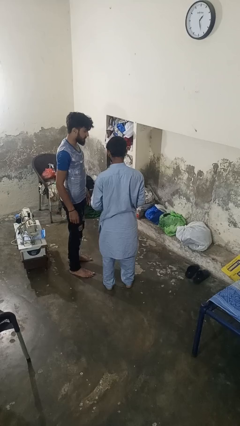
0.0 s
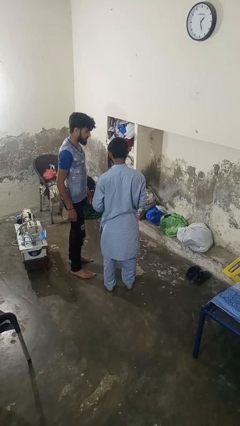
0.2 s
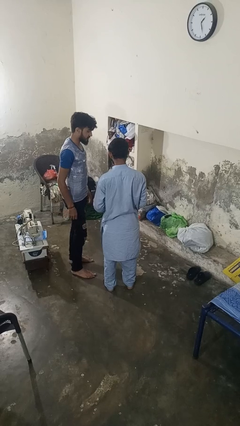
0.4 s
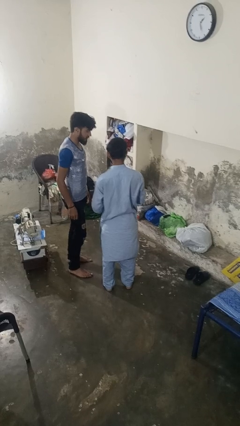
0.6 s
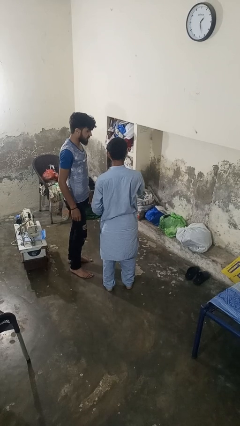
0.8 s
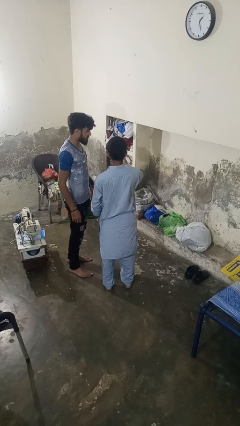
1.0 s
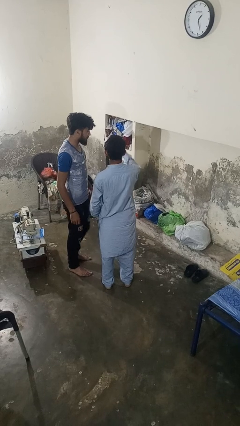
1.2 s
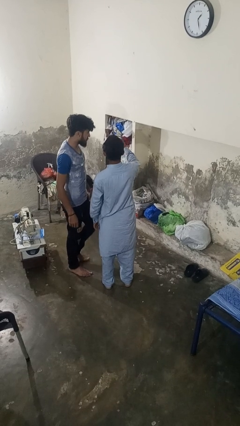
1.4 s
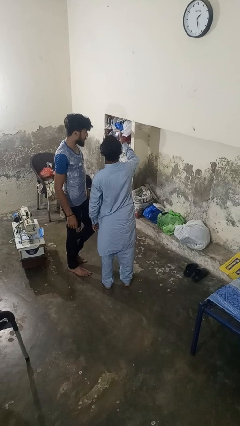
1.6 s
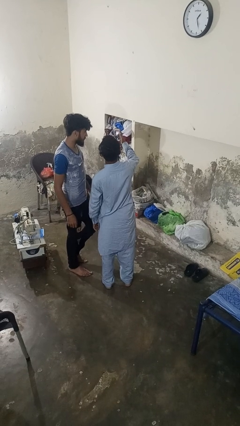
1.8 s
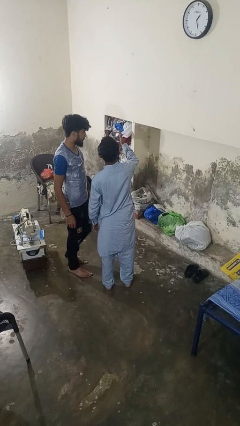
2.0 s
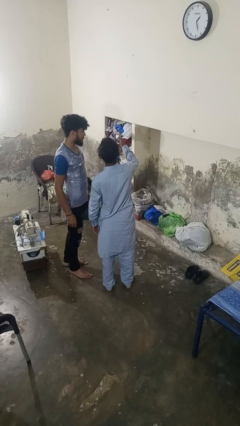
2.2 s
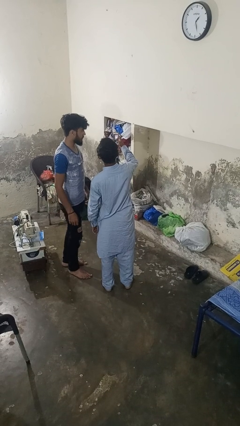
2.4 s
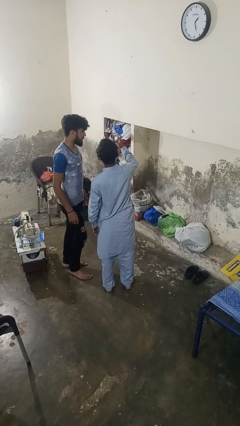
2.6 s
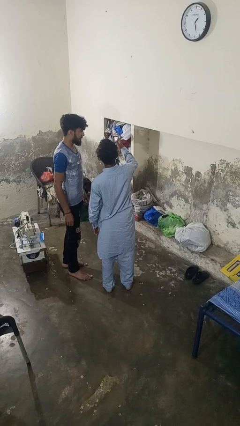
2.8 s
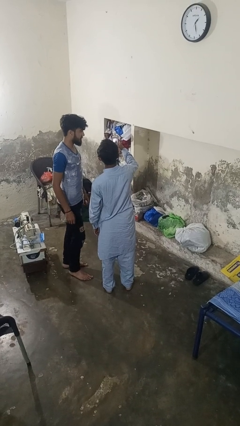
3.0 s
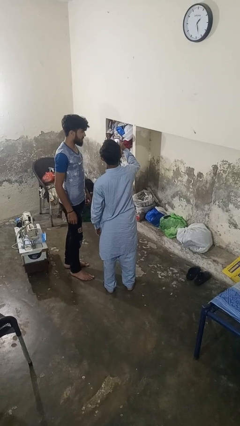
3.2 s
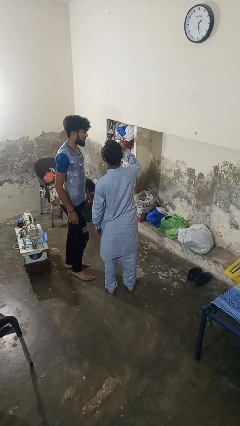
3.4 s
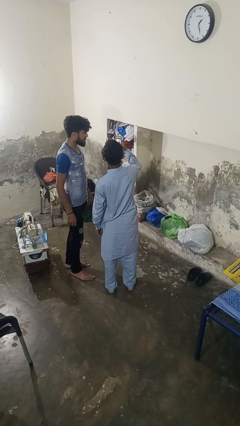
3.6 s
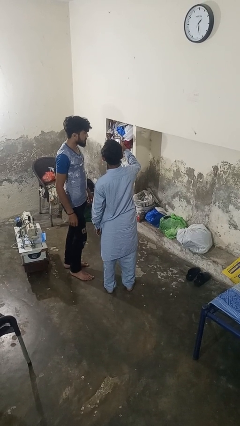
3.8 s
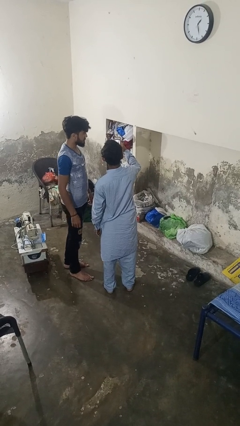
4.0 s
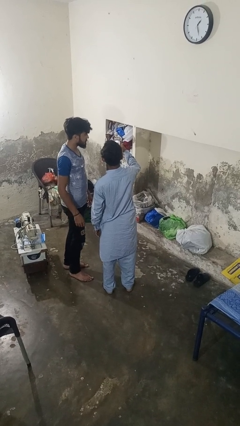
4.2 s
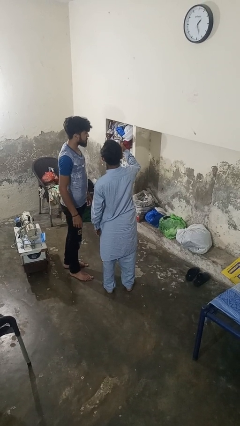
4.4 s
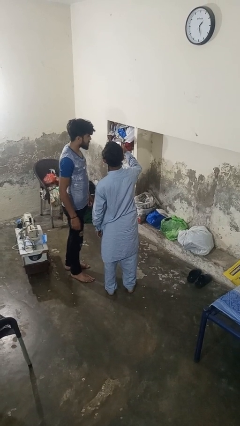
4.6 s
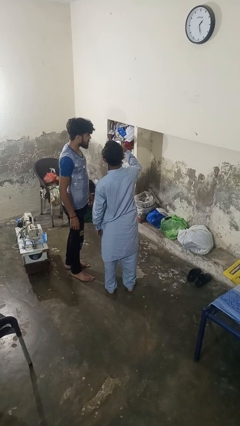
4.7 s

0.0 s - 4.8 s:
person takes selfie with person

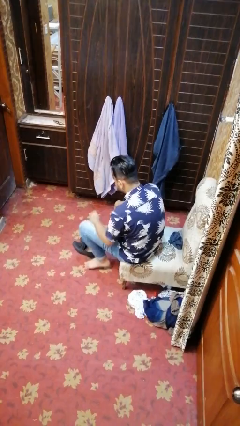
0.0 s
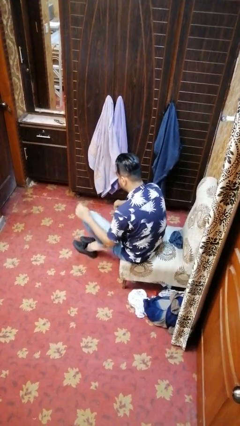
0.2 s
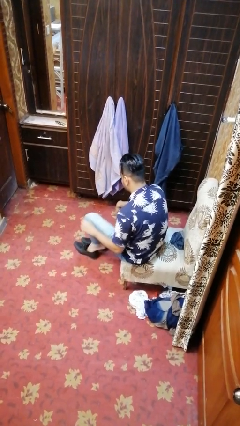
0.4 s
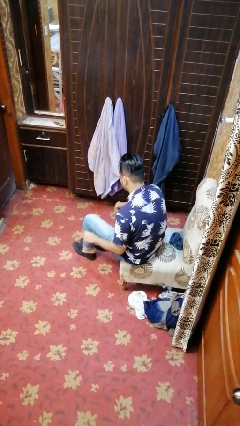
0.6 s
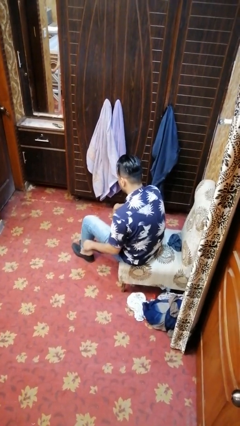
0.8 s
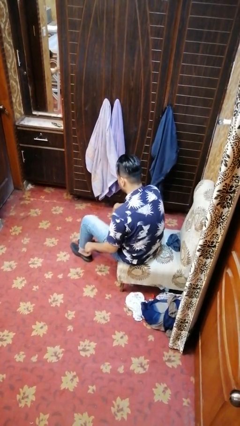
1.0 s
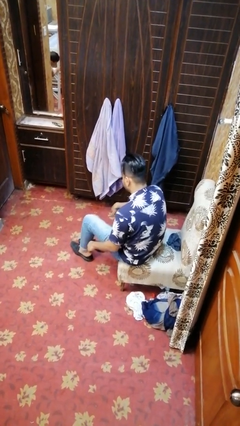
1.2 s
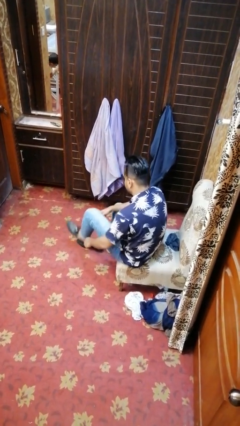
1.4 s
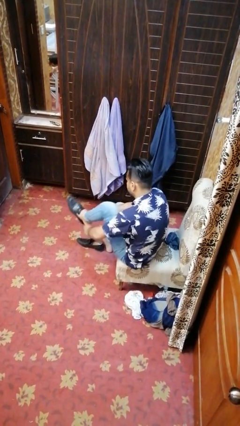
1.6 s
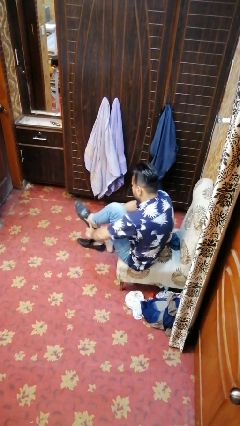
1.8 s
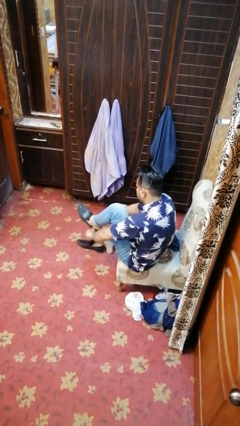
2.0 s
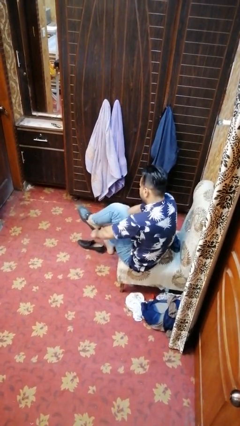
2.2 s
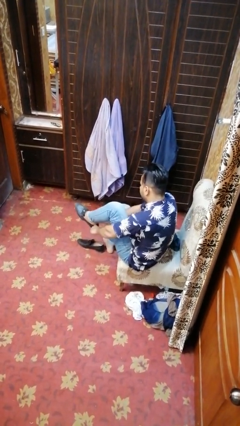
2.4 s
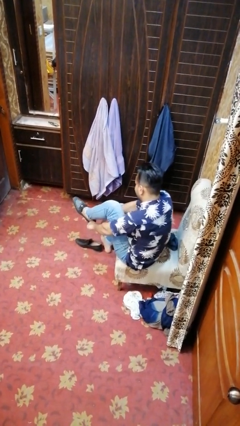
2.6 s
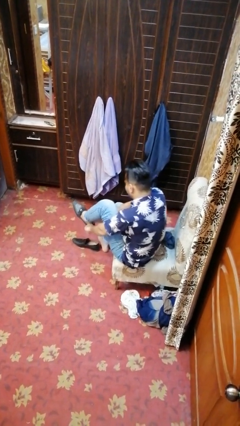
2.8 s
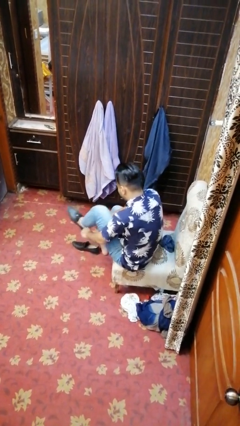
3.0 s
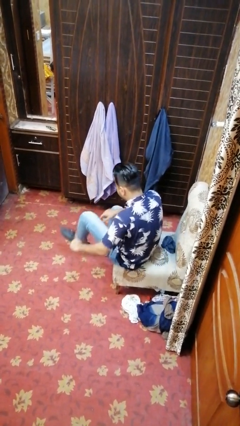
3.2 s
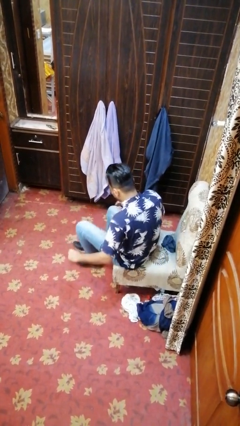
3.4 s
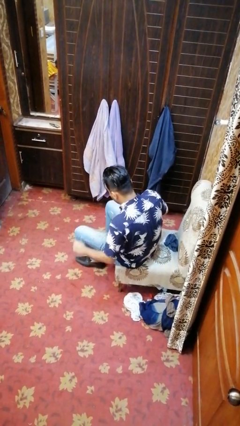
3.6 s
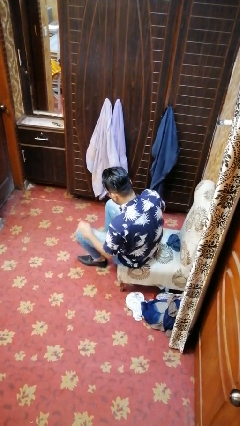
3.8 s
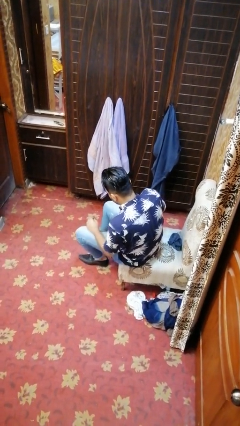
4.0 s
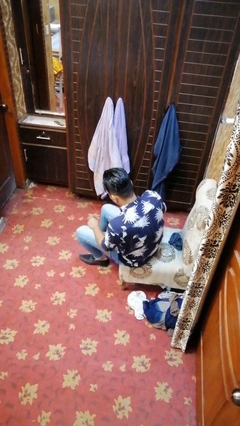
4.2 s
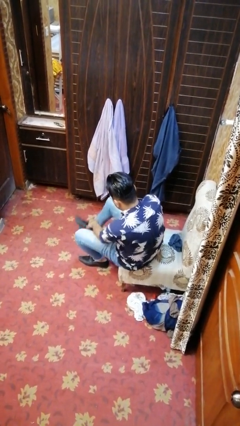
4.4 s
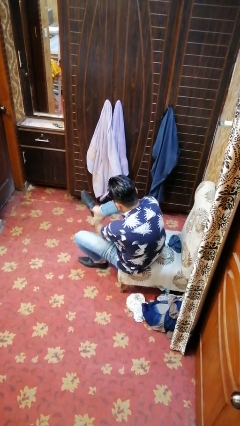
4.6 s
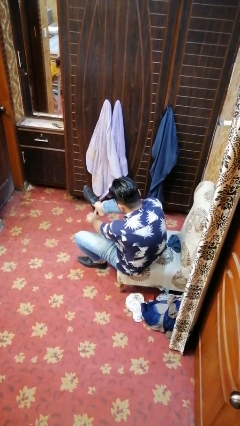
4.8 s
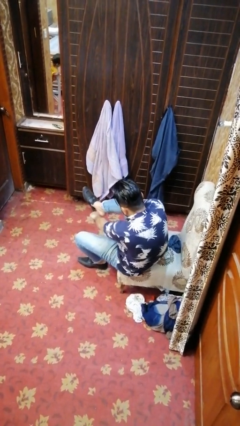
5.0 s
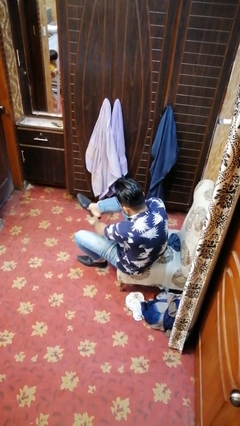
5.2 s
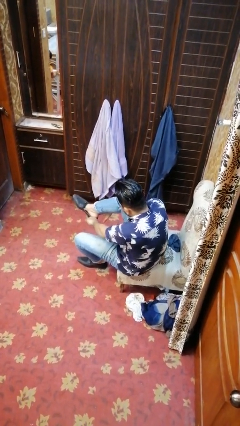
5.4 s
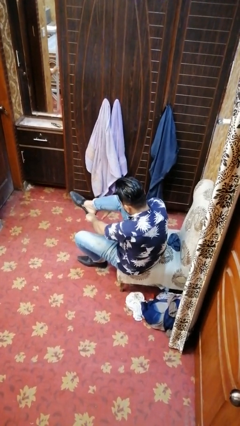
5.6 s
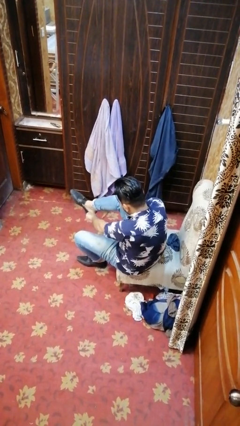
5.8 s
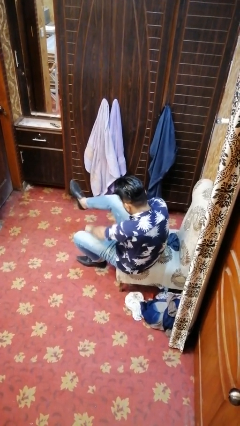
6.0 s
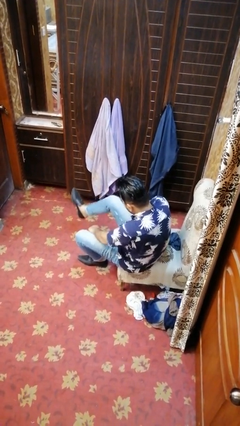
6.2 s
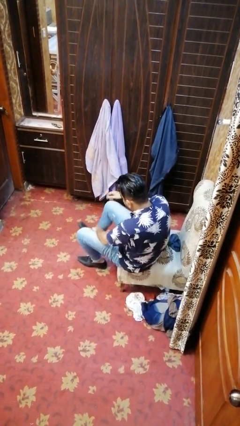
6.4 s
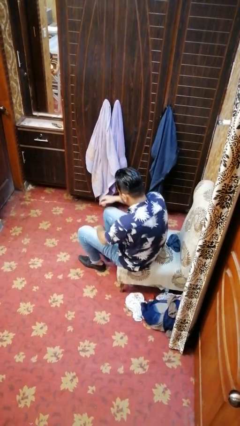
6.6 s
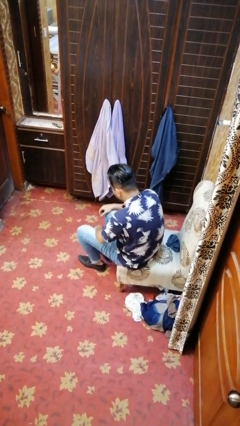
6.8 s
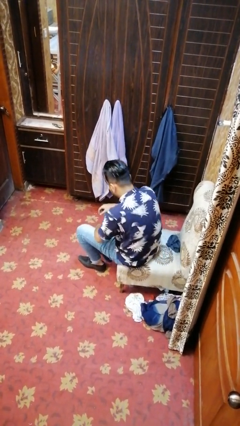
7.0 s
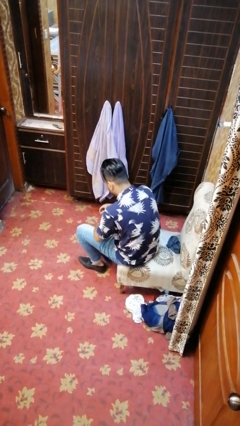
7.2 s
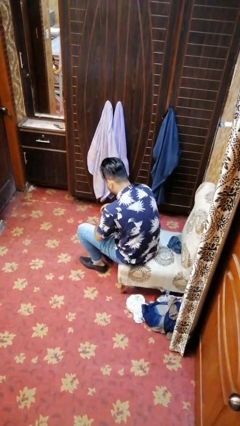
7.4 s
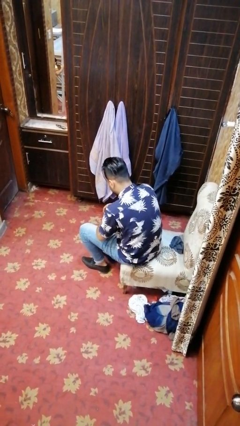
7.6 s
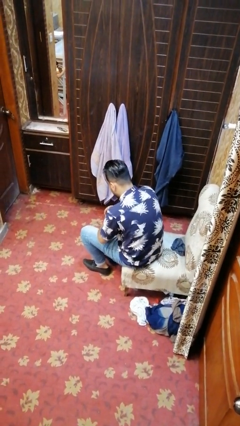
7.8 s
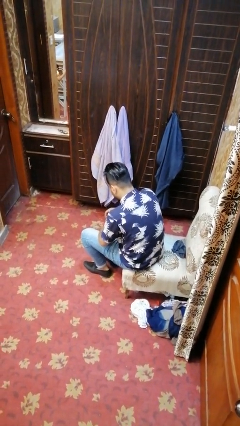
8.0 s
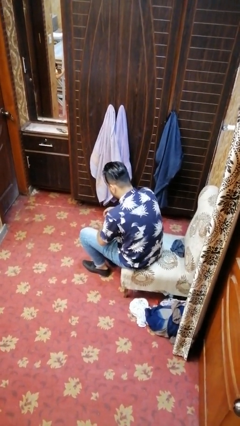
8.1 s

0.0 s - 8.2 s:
person puts on shoes

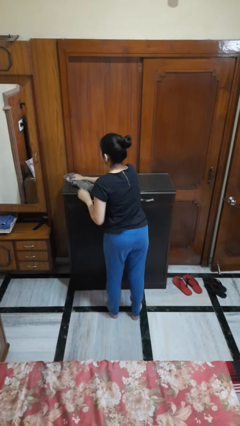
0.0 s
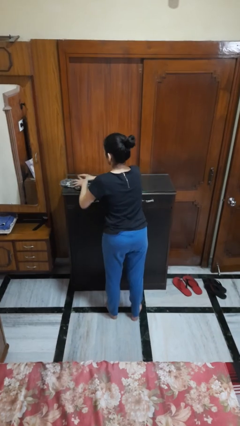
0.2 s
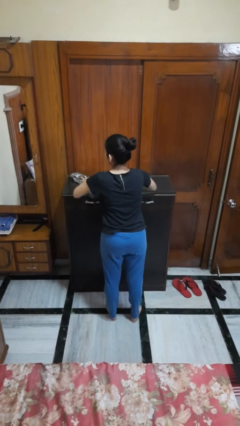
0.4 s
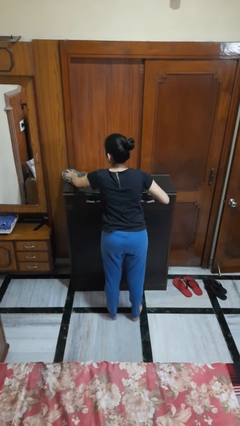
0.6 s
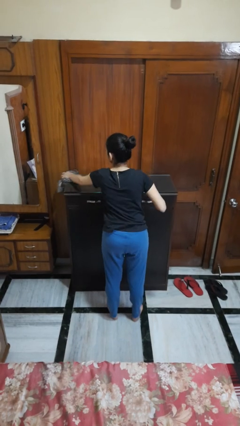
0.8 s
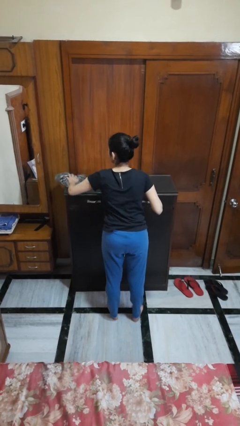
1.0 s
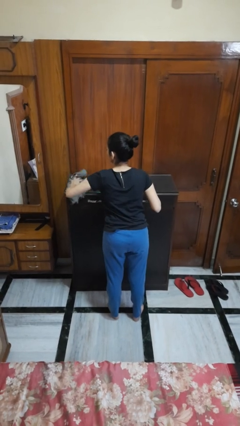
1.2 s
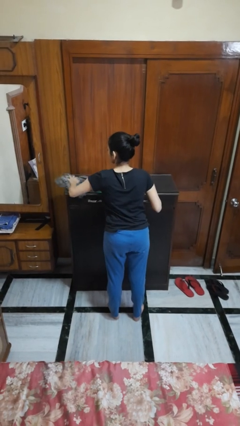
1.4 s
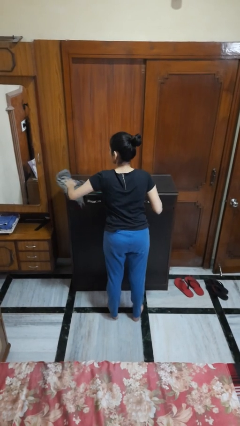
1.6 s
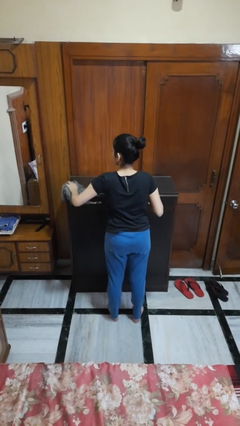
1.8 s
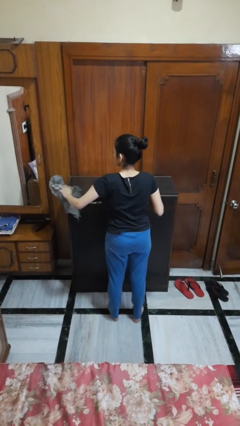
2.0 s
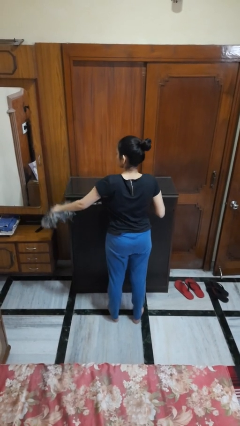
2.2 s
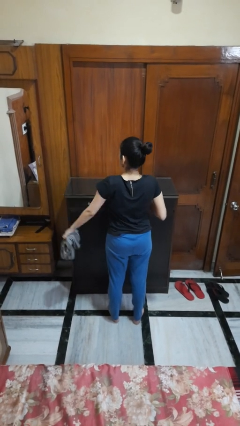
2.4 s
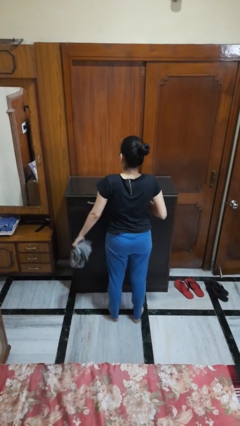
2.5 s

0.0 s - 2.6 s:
person cleans table with rag

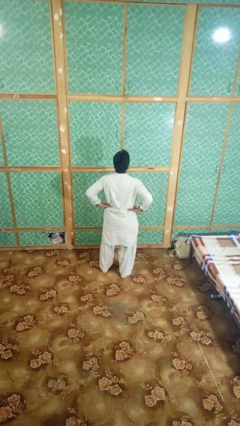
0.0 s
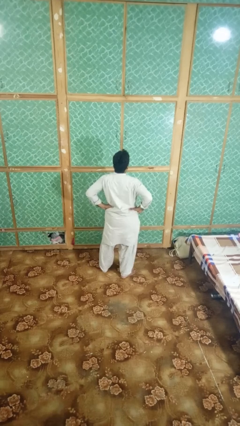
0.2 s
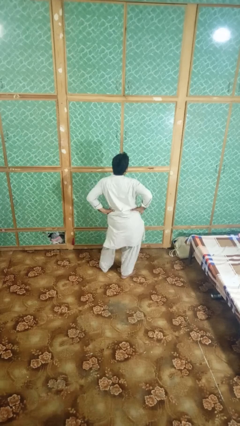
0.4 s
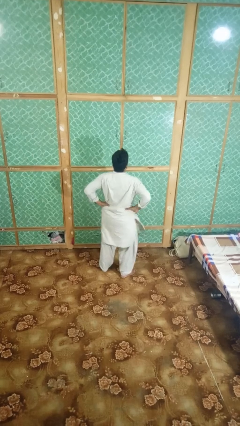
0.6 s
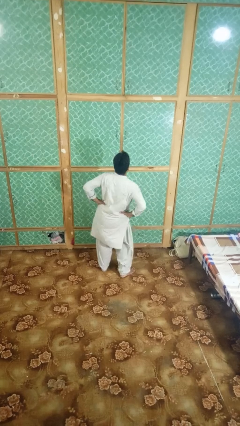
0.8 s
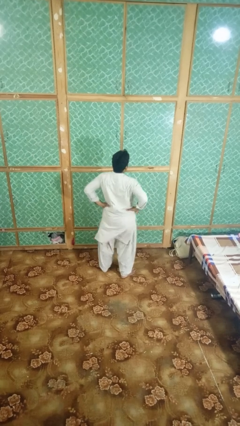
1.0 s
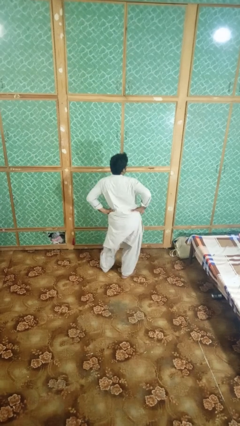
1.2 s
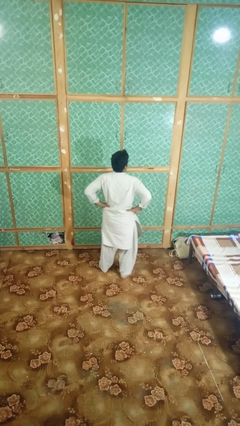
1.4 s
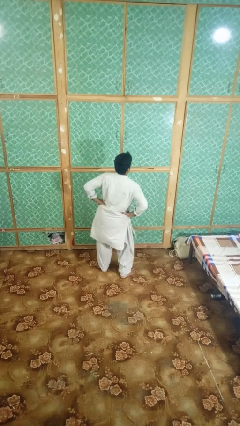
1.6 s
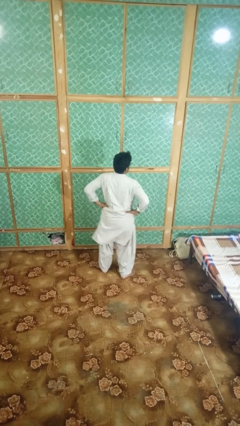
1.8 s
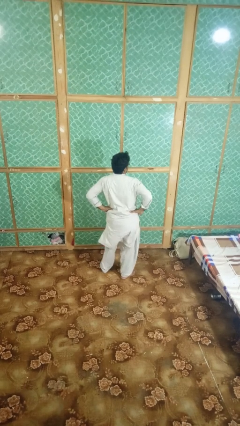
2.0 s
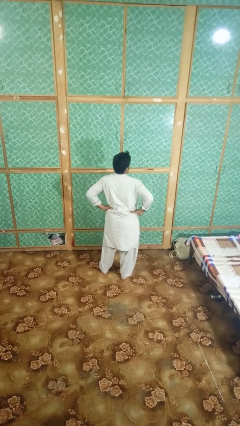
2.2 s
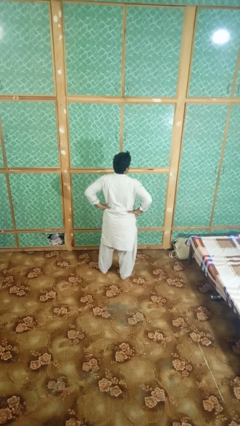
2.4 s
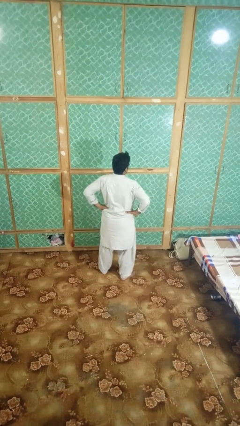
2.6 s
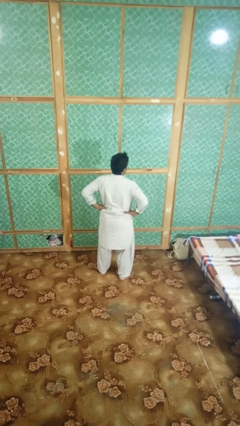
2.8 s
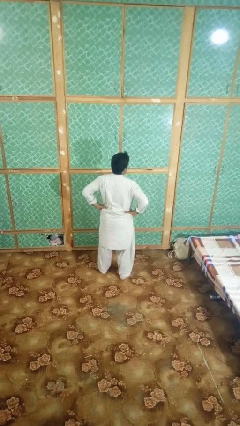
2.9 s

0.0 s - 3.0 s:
person wiggles hips
